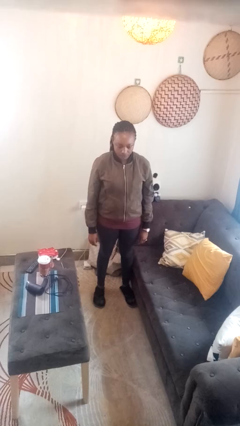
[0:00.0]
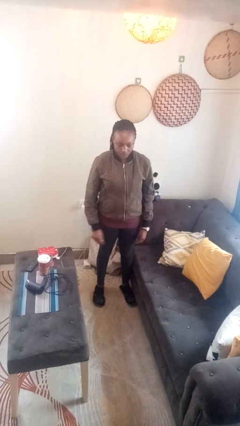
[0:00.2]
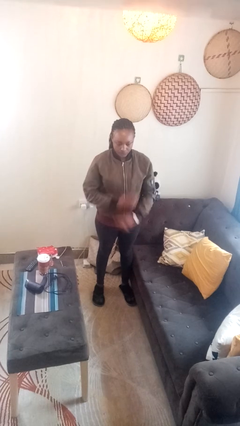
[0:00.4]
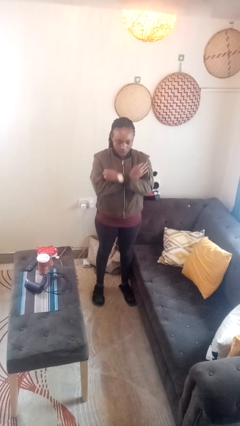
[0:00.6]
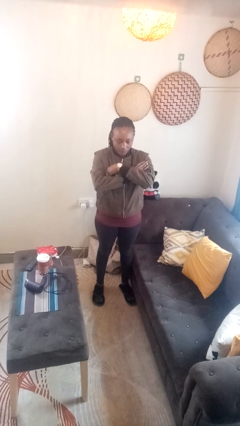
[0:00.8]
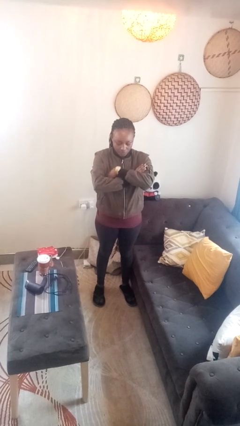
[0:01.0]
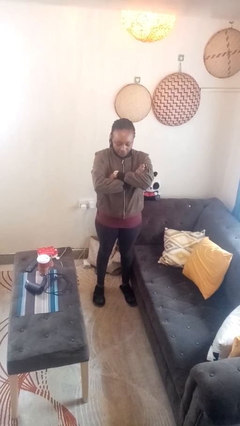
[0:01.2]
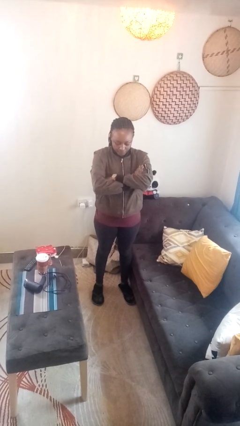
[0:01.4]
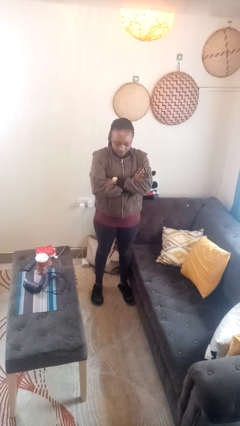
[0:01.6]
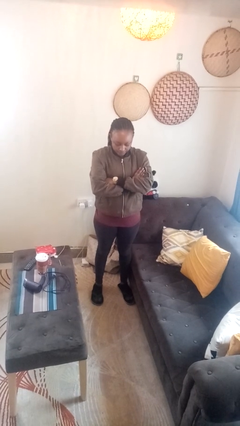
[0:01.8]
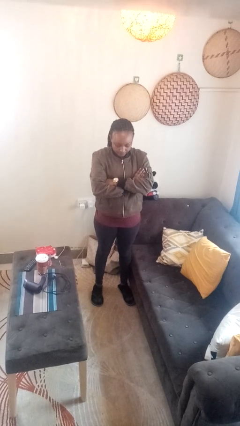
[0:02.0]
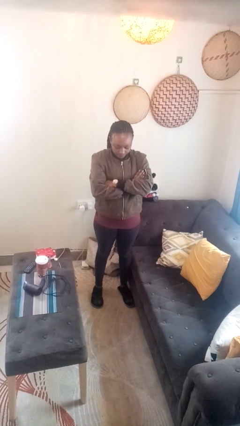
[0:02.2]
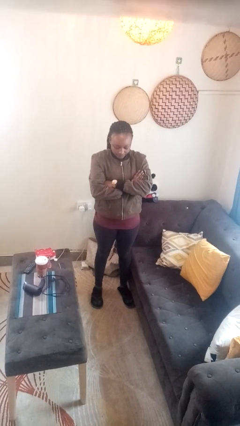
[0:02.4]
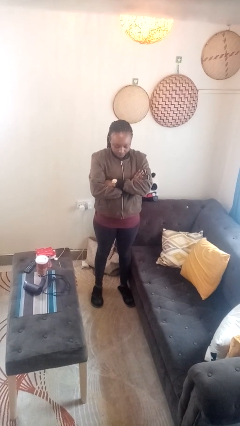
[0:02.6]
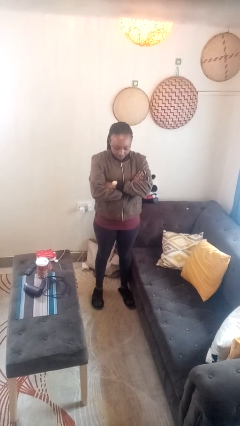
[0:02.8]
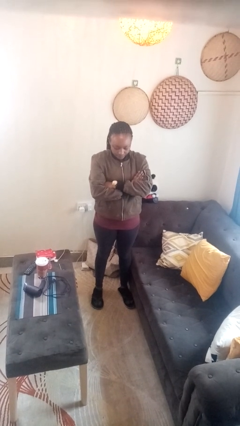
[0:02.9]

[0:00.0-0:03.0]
person gestures arms x

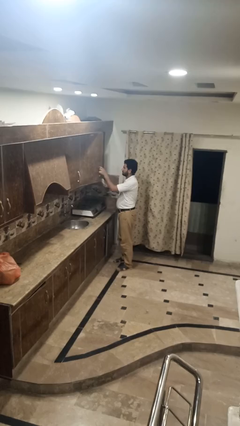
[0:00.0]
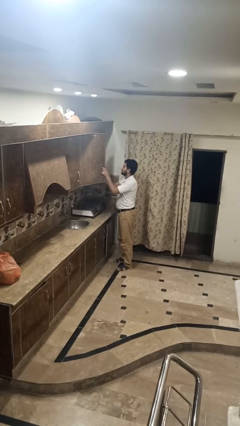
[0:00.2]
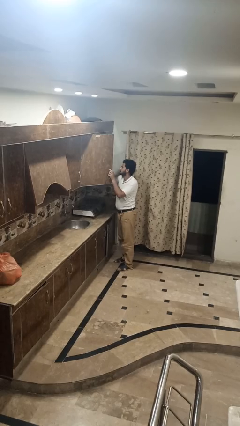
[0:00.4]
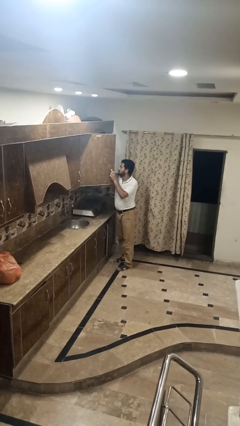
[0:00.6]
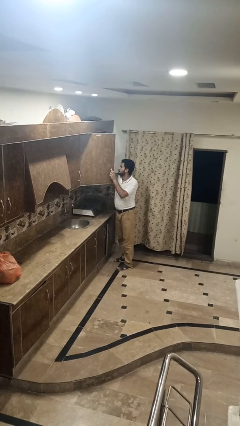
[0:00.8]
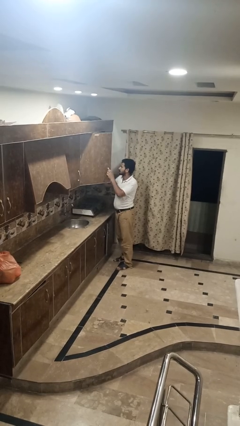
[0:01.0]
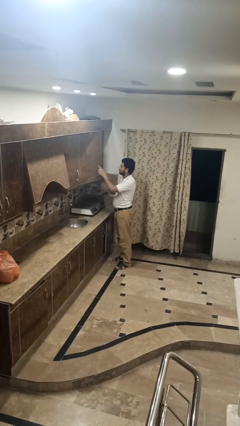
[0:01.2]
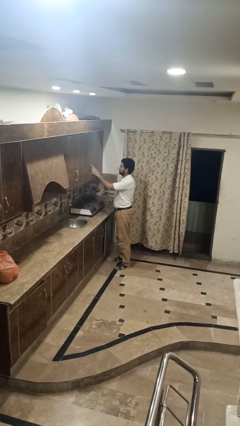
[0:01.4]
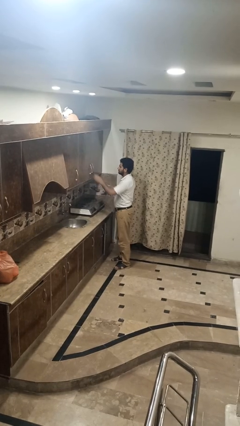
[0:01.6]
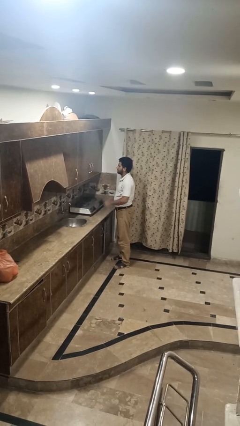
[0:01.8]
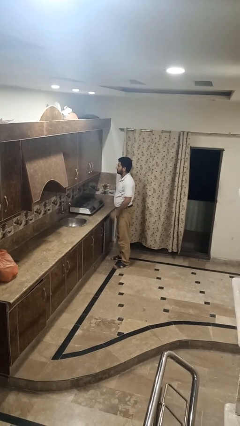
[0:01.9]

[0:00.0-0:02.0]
person puts object into kitchen drawer

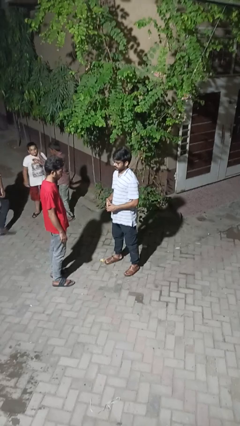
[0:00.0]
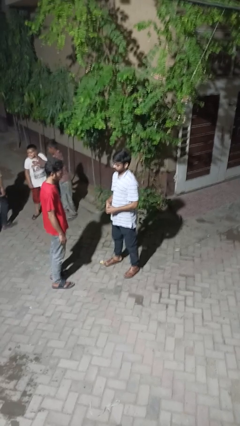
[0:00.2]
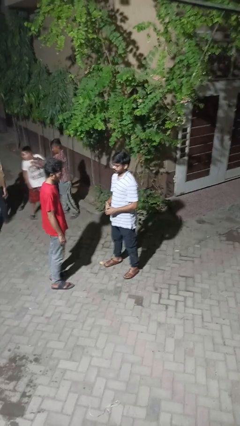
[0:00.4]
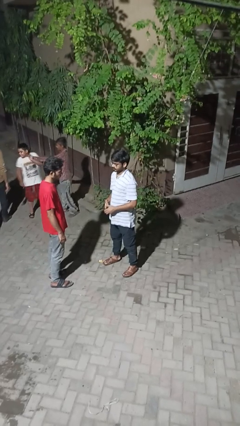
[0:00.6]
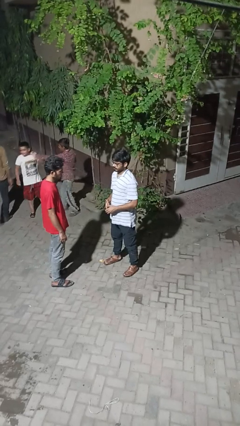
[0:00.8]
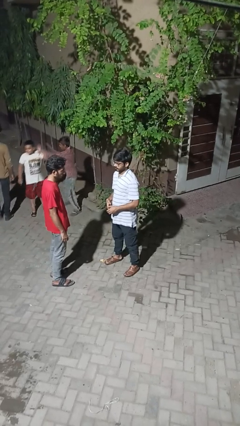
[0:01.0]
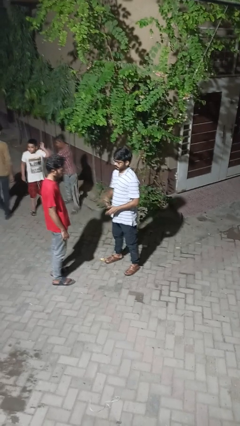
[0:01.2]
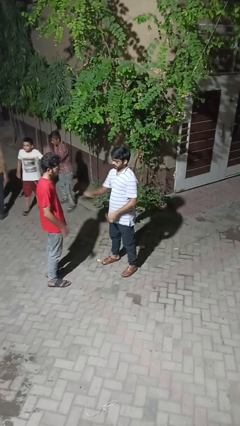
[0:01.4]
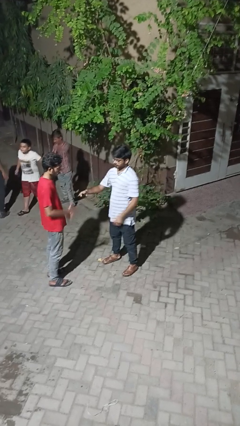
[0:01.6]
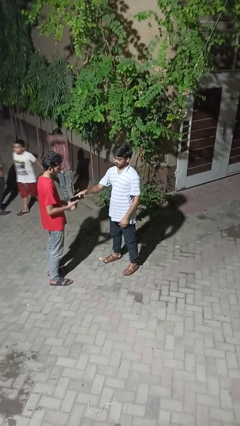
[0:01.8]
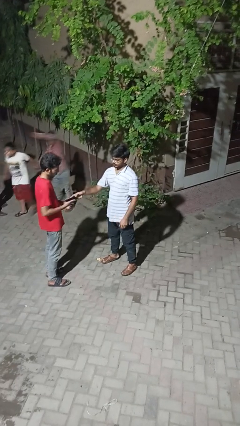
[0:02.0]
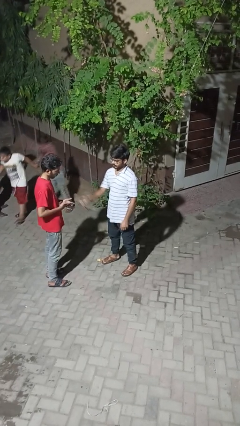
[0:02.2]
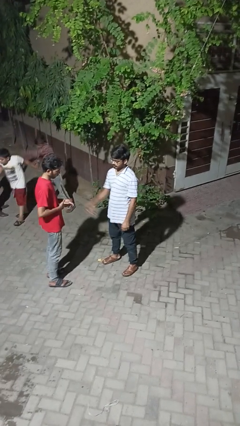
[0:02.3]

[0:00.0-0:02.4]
person transfers object to person

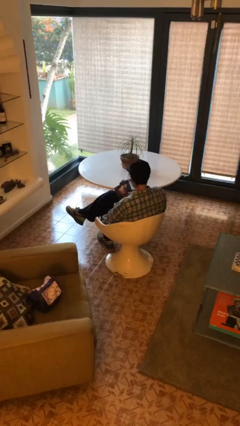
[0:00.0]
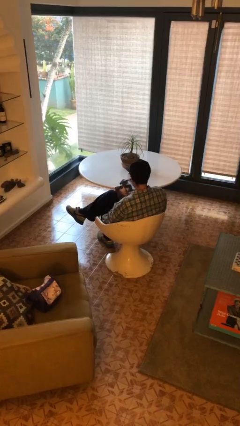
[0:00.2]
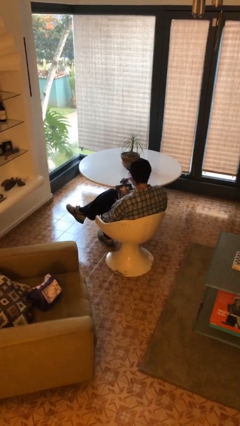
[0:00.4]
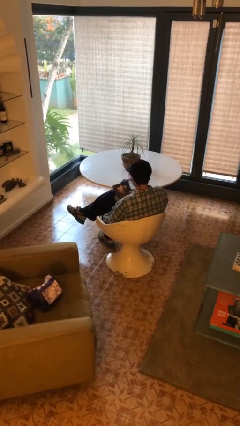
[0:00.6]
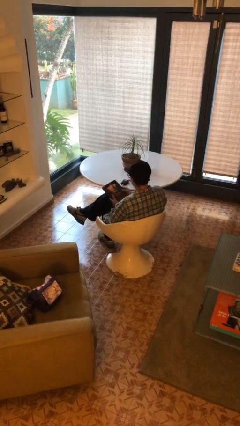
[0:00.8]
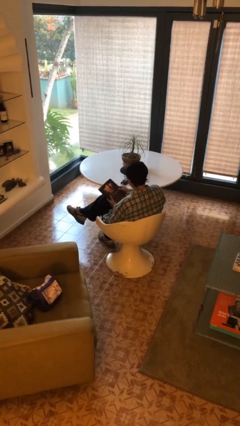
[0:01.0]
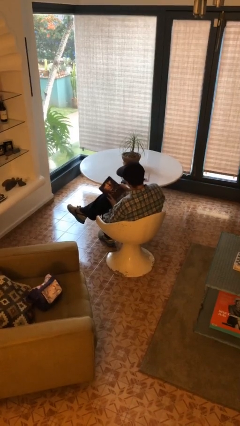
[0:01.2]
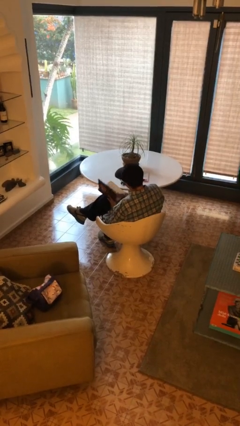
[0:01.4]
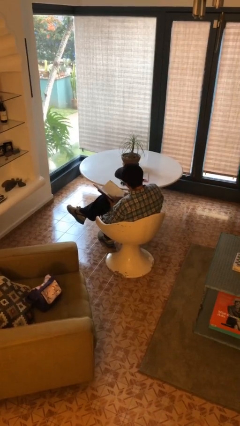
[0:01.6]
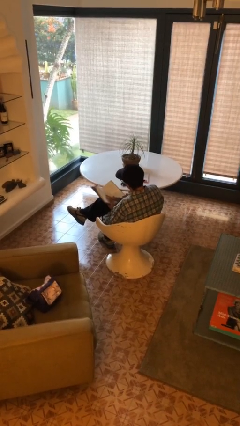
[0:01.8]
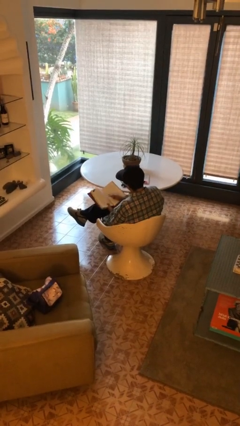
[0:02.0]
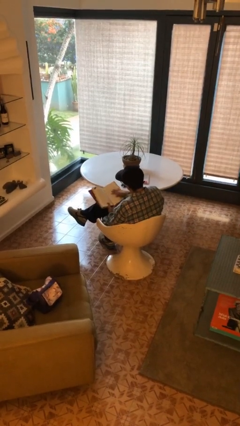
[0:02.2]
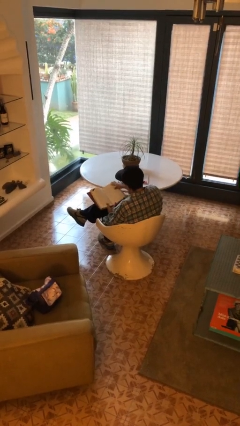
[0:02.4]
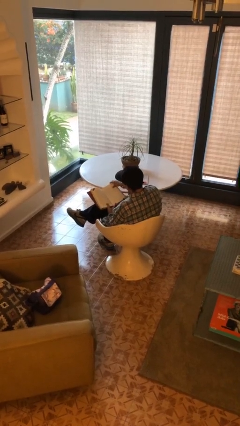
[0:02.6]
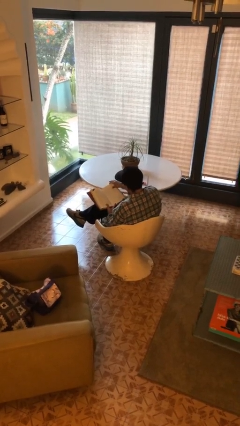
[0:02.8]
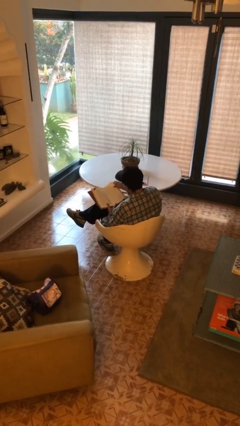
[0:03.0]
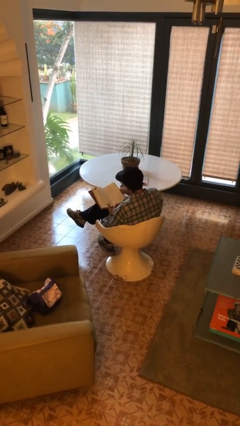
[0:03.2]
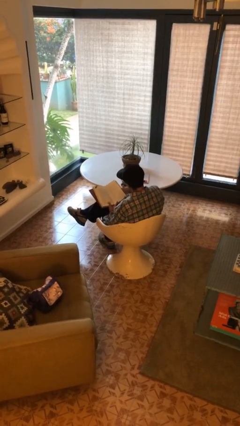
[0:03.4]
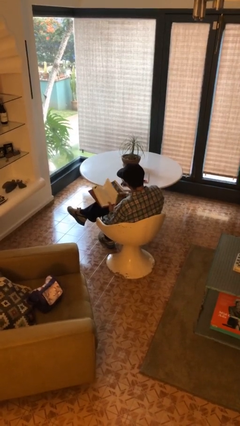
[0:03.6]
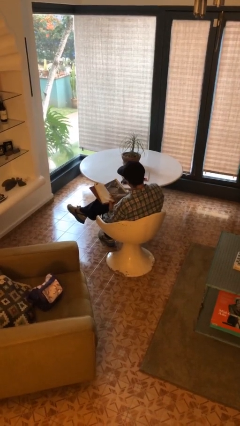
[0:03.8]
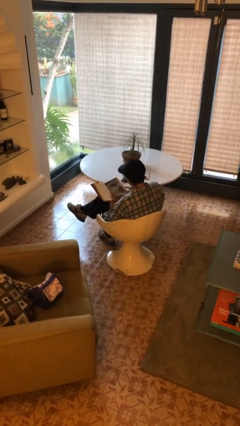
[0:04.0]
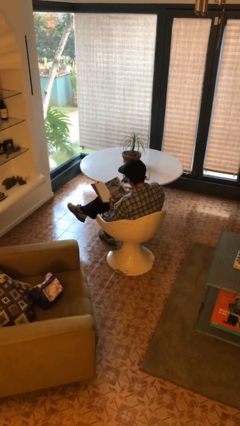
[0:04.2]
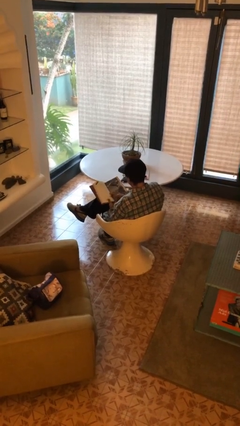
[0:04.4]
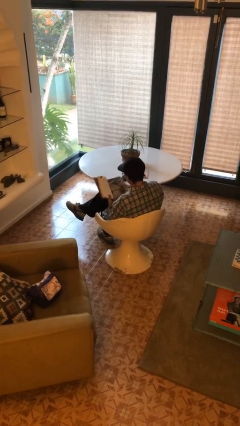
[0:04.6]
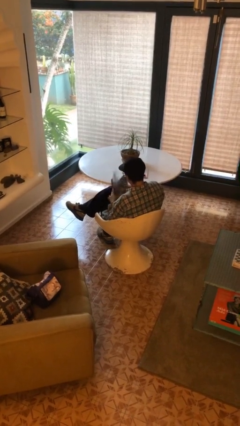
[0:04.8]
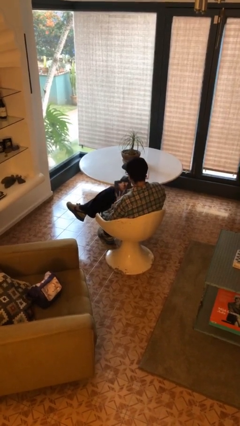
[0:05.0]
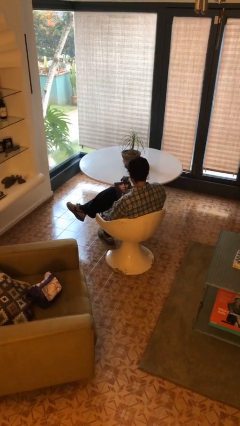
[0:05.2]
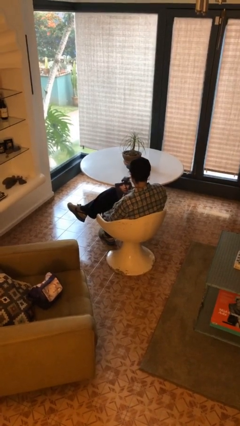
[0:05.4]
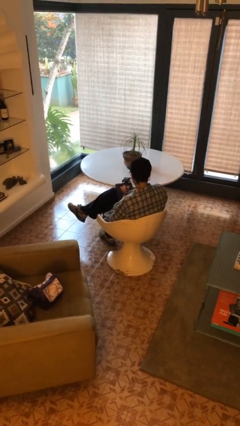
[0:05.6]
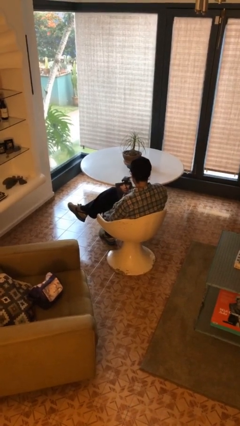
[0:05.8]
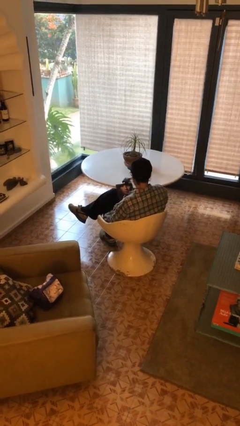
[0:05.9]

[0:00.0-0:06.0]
person reads book

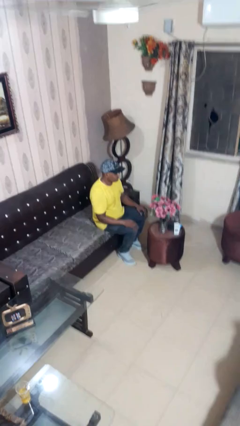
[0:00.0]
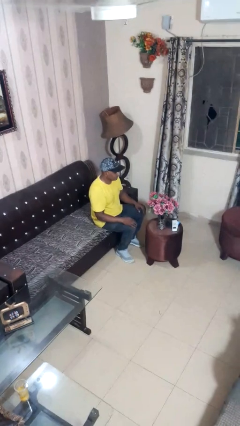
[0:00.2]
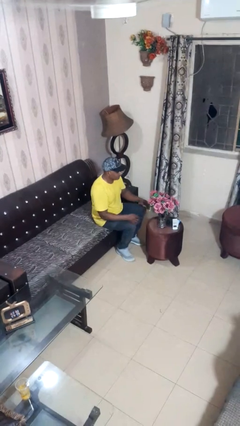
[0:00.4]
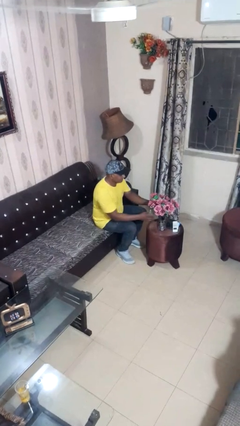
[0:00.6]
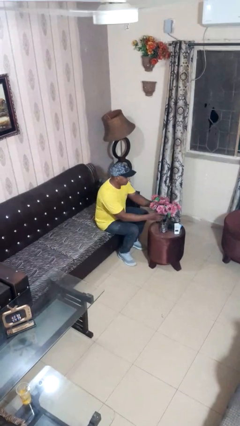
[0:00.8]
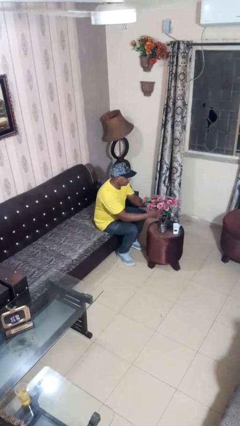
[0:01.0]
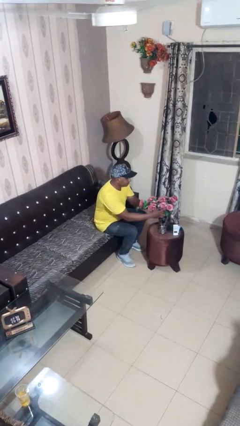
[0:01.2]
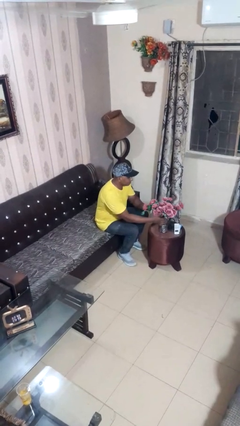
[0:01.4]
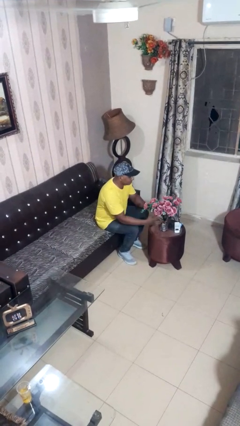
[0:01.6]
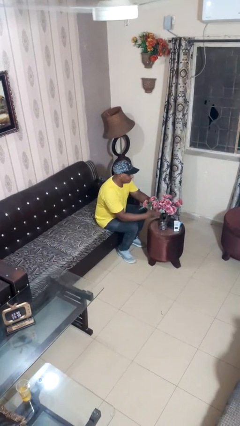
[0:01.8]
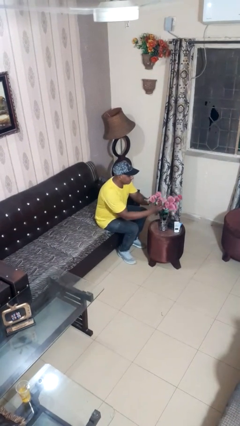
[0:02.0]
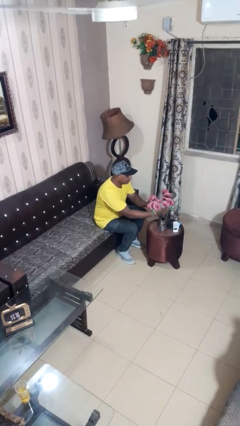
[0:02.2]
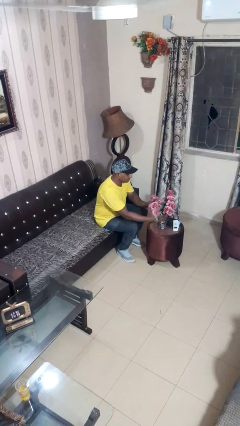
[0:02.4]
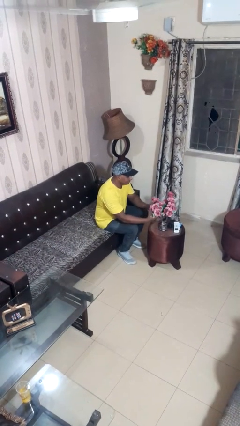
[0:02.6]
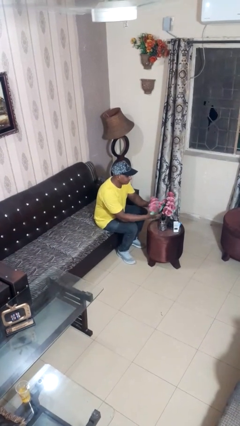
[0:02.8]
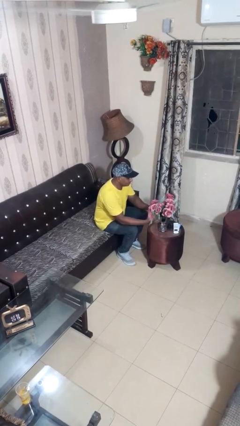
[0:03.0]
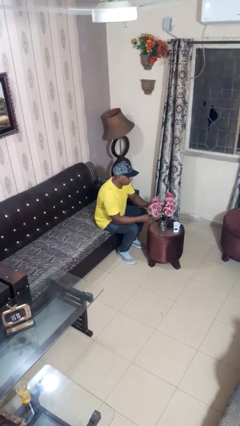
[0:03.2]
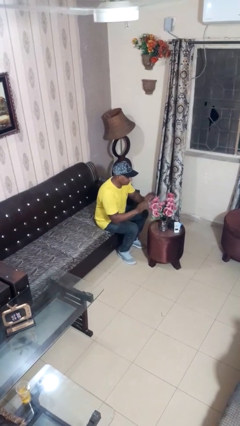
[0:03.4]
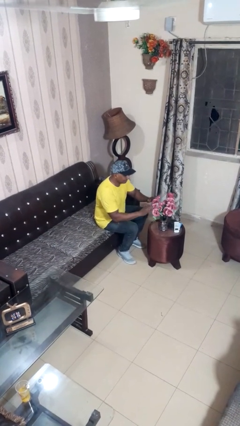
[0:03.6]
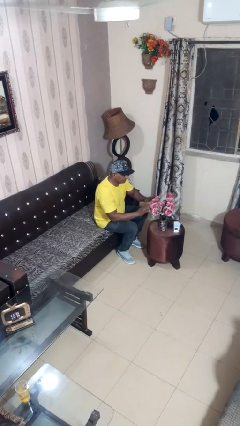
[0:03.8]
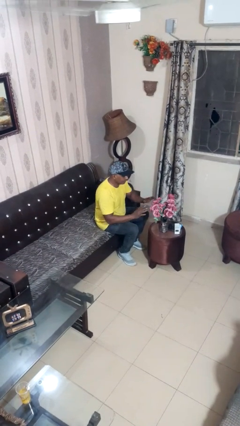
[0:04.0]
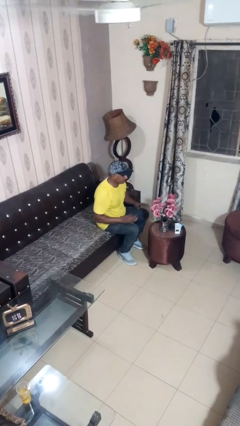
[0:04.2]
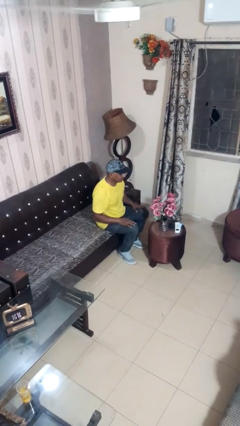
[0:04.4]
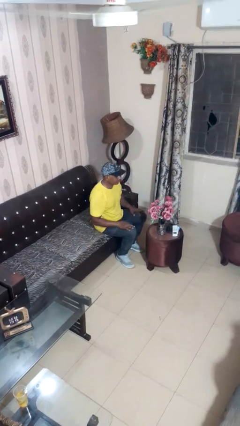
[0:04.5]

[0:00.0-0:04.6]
person arranges flowers in vase
